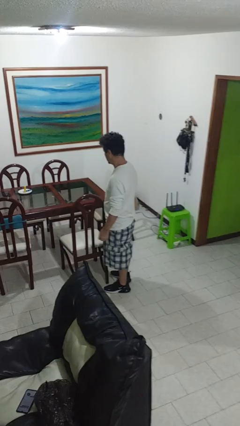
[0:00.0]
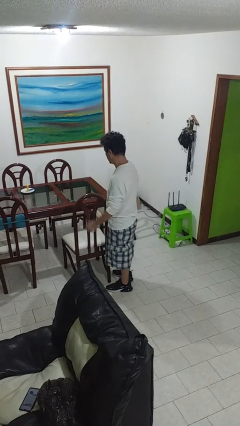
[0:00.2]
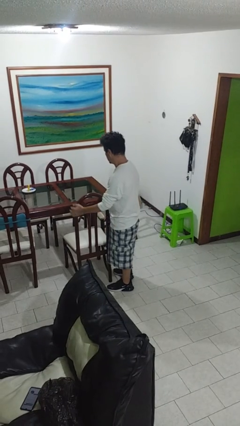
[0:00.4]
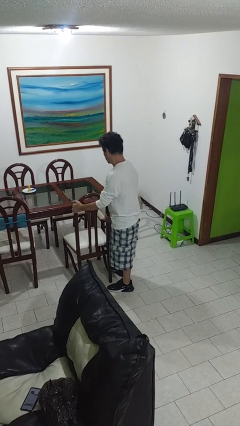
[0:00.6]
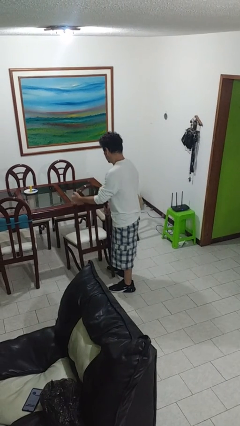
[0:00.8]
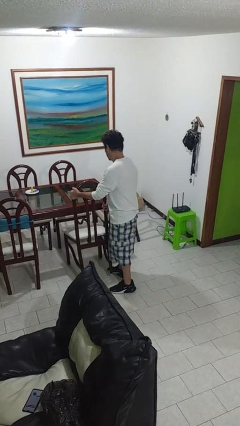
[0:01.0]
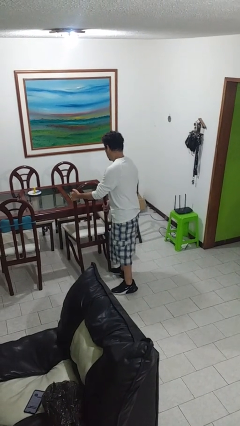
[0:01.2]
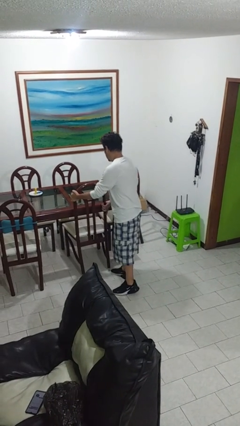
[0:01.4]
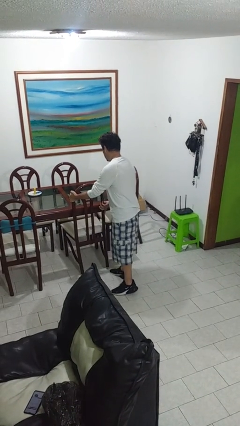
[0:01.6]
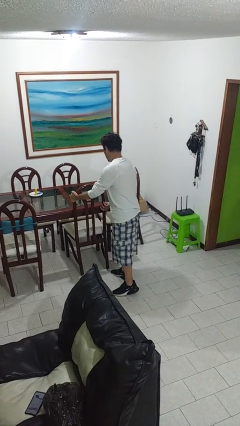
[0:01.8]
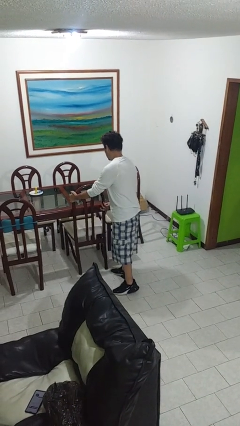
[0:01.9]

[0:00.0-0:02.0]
person pushes in chair

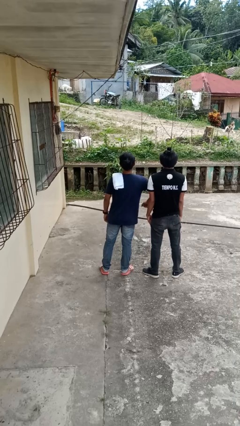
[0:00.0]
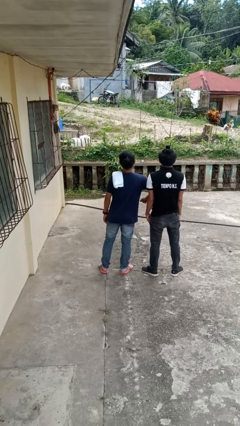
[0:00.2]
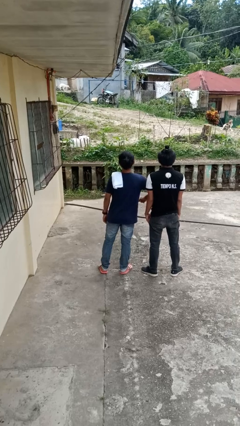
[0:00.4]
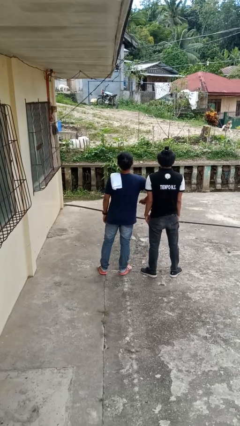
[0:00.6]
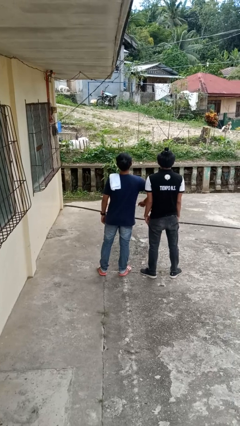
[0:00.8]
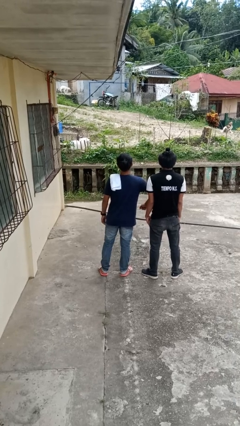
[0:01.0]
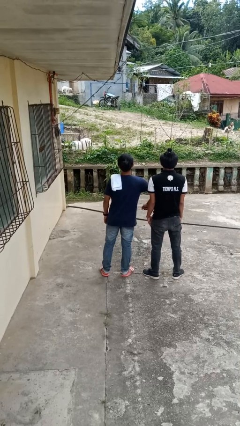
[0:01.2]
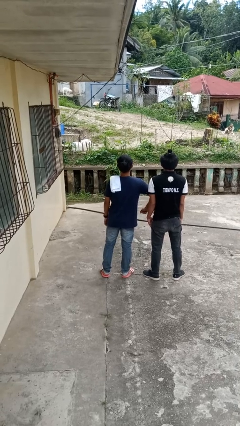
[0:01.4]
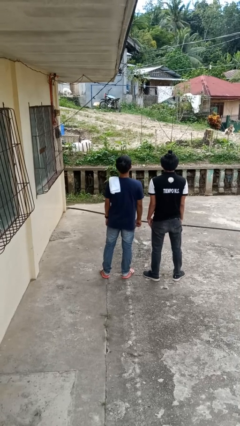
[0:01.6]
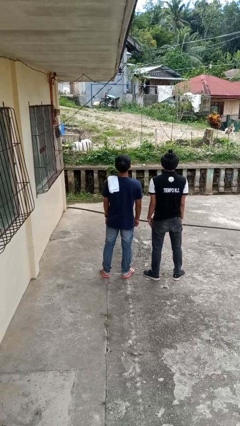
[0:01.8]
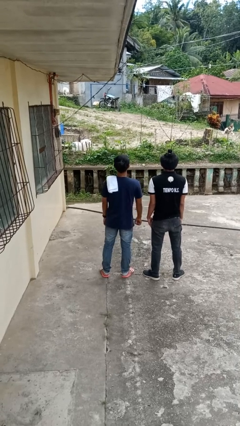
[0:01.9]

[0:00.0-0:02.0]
person nudges person with elbow

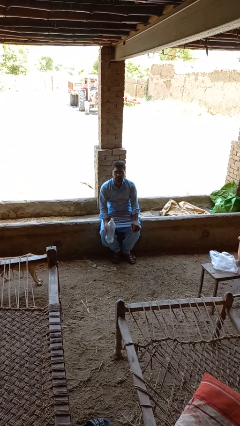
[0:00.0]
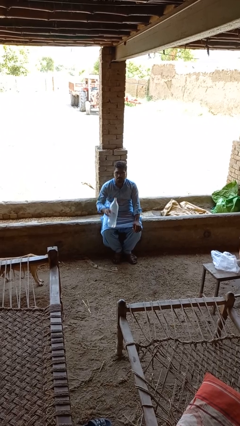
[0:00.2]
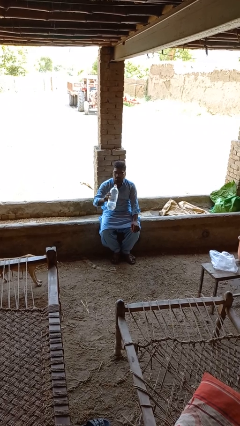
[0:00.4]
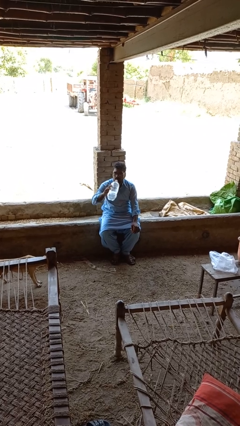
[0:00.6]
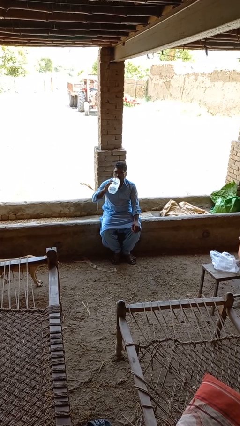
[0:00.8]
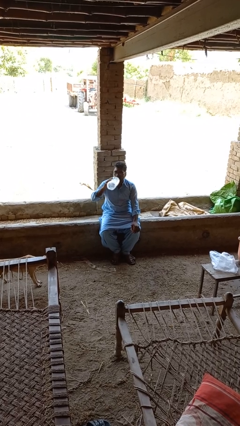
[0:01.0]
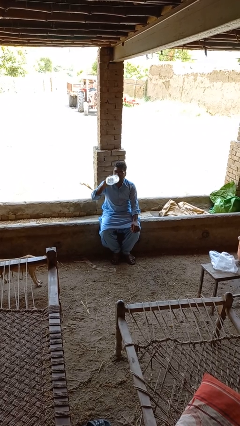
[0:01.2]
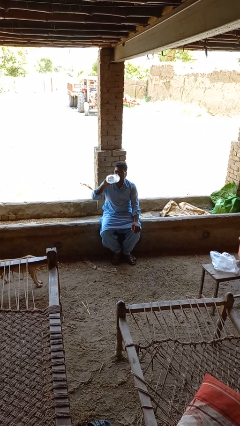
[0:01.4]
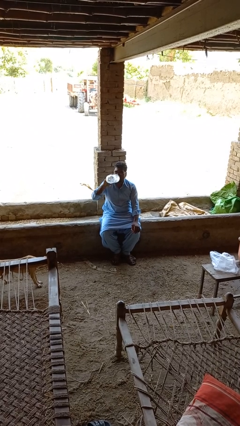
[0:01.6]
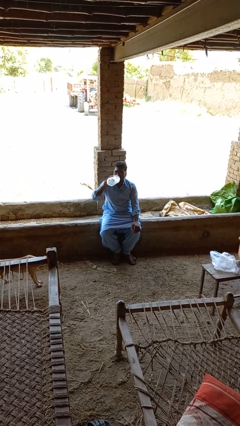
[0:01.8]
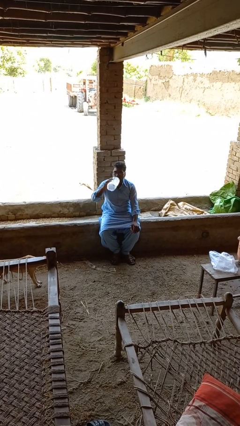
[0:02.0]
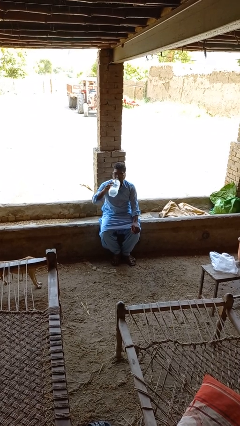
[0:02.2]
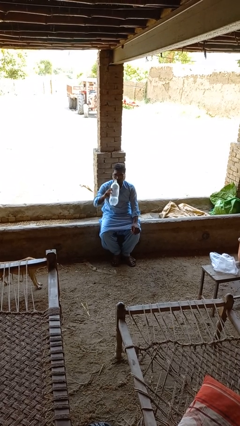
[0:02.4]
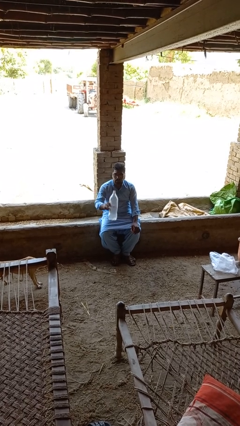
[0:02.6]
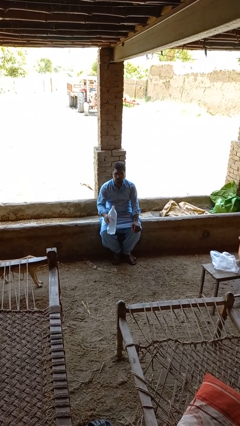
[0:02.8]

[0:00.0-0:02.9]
person drinks from bottle

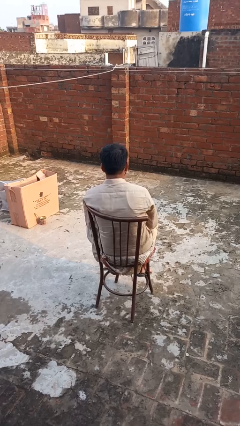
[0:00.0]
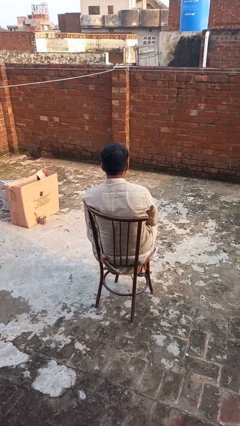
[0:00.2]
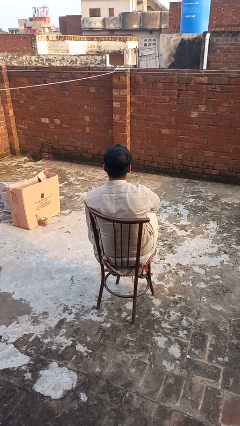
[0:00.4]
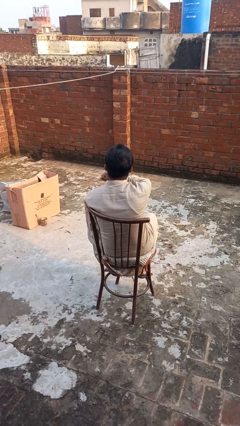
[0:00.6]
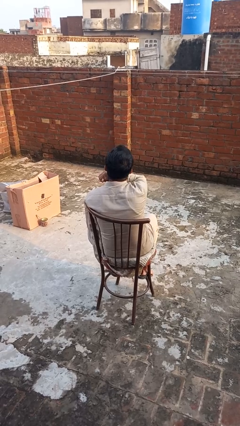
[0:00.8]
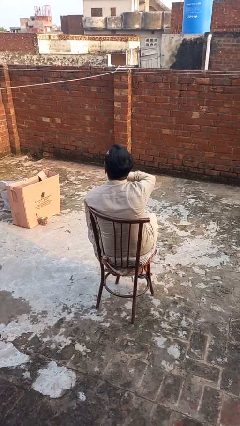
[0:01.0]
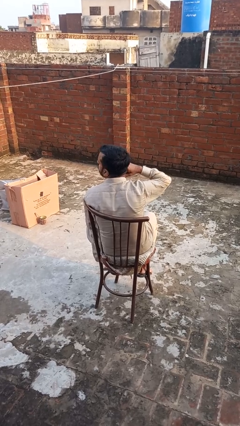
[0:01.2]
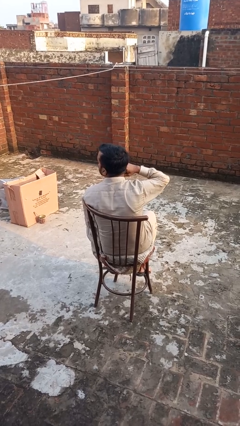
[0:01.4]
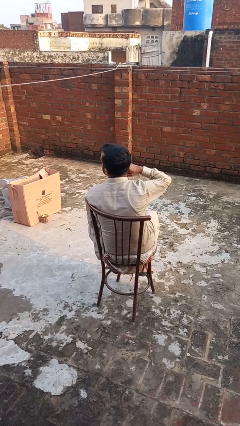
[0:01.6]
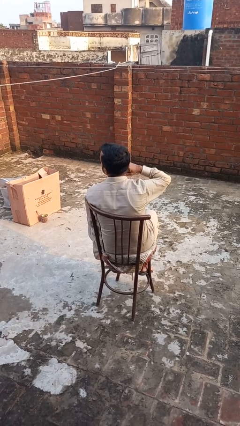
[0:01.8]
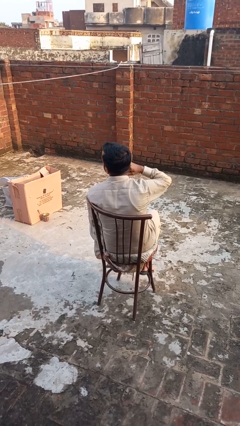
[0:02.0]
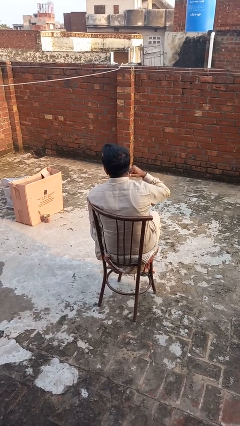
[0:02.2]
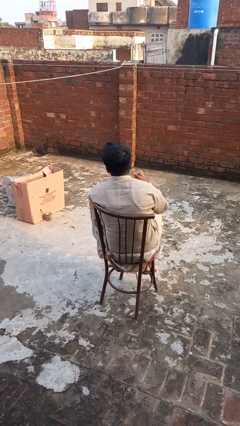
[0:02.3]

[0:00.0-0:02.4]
person gestures cut

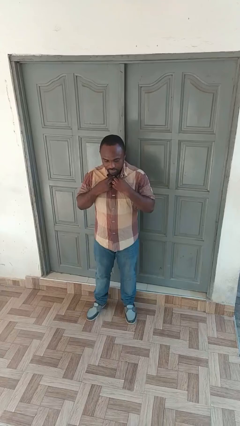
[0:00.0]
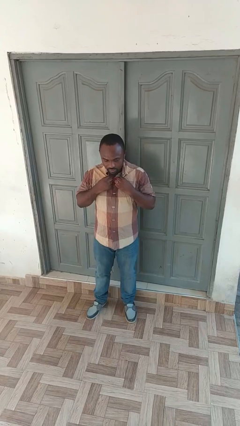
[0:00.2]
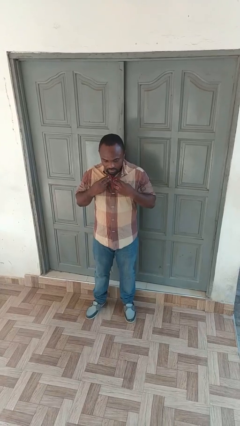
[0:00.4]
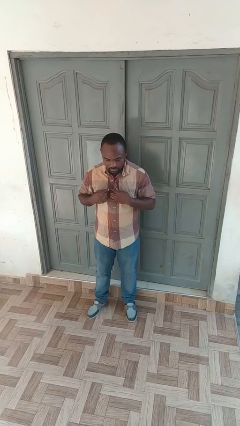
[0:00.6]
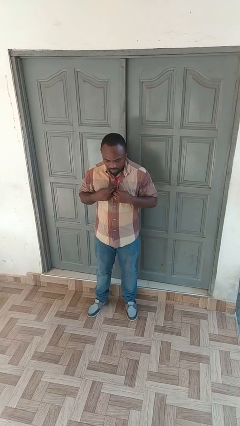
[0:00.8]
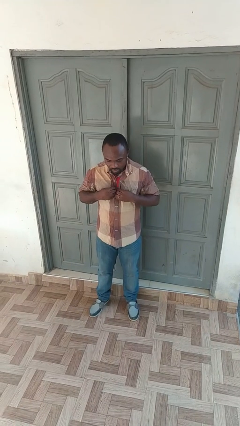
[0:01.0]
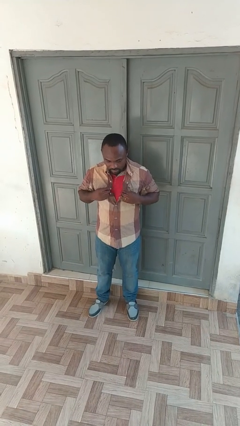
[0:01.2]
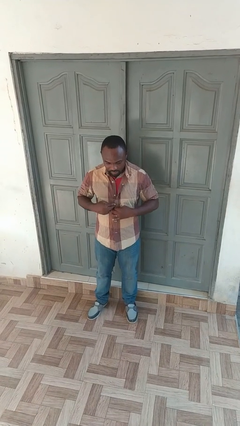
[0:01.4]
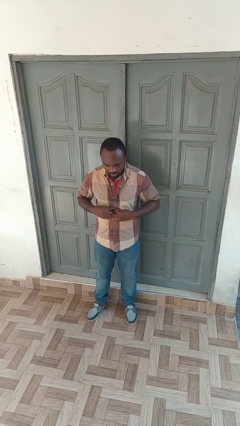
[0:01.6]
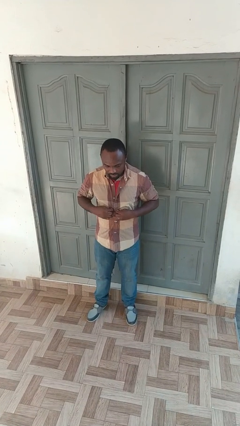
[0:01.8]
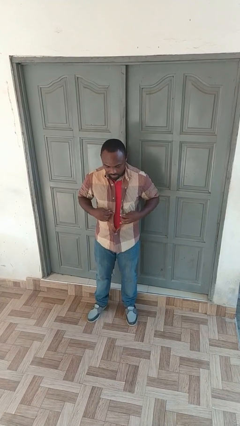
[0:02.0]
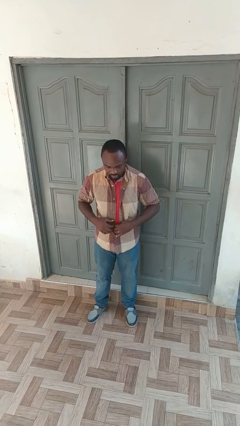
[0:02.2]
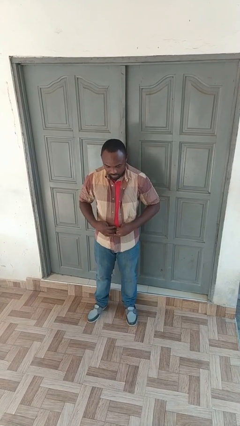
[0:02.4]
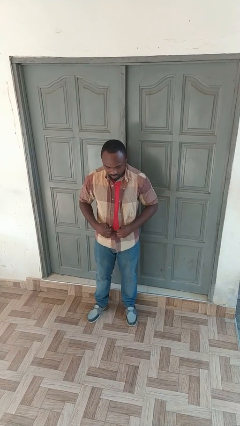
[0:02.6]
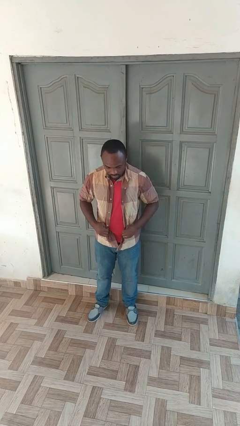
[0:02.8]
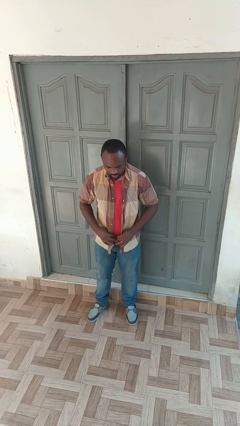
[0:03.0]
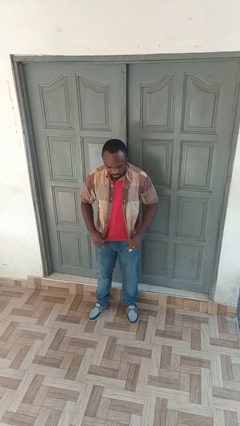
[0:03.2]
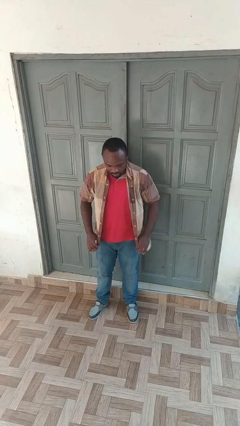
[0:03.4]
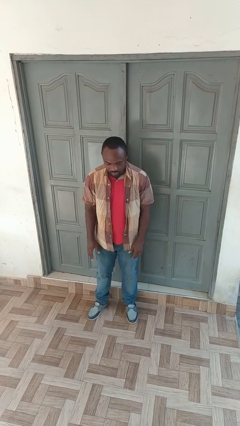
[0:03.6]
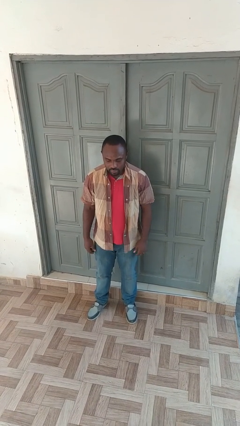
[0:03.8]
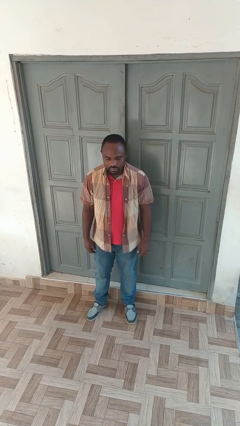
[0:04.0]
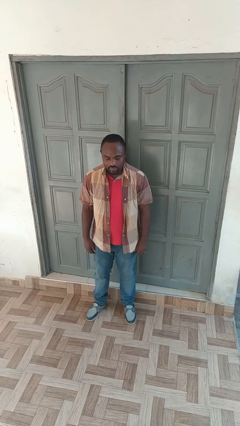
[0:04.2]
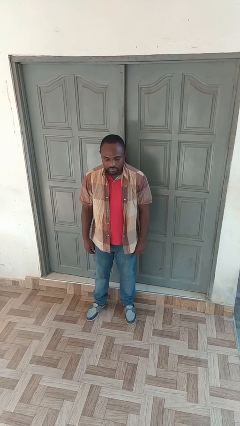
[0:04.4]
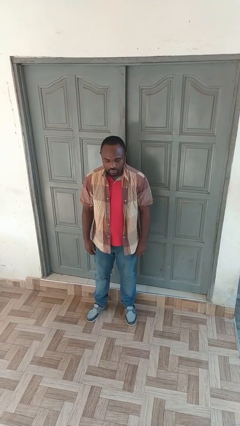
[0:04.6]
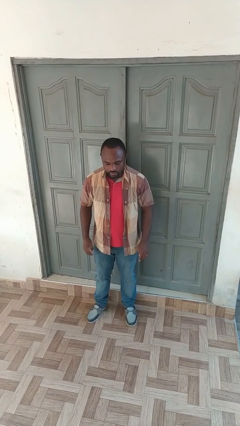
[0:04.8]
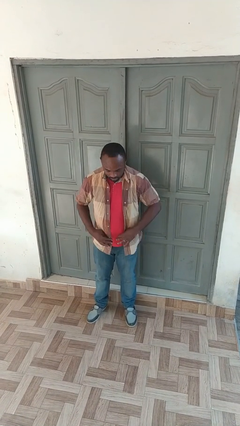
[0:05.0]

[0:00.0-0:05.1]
person unbuttons shirt

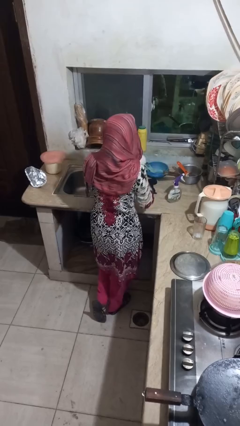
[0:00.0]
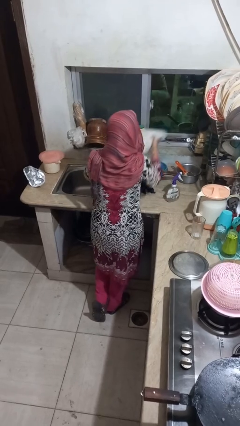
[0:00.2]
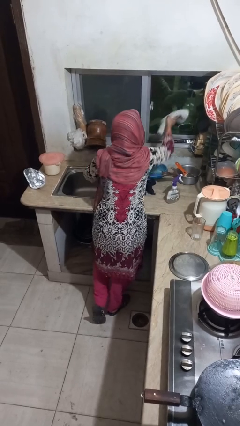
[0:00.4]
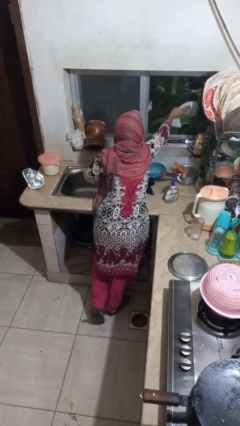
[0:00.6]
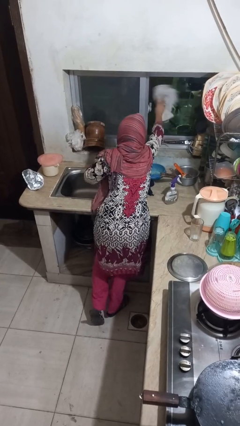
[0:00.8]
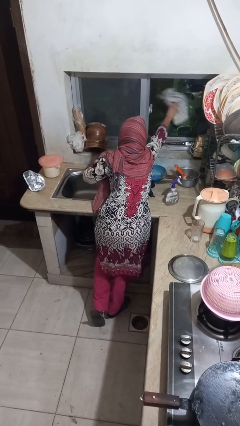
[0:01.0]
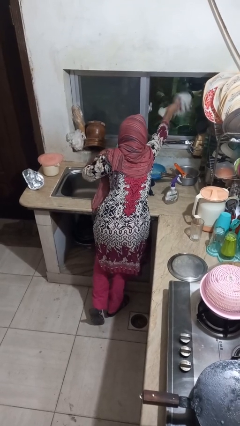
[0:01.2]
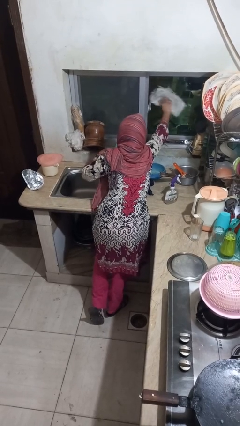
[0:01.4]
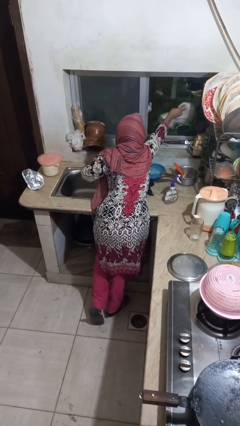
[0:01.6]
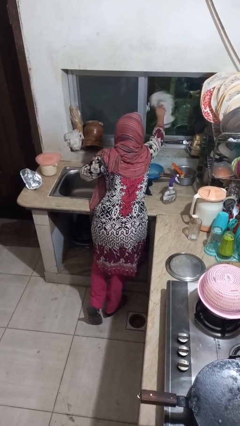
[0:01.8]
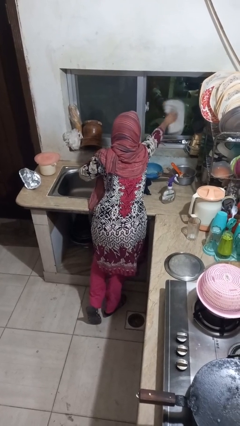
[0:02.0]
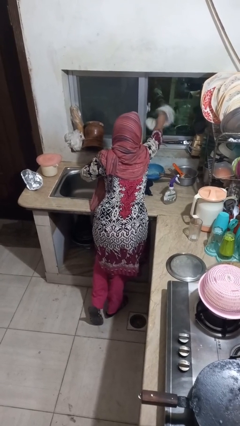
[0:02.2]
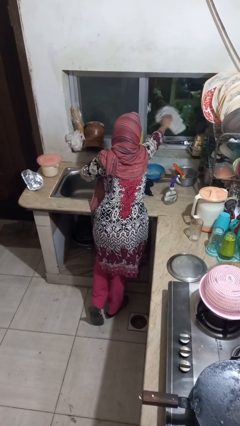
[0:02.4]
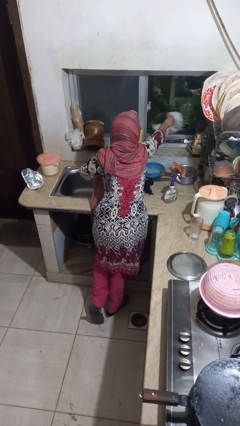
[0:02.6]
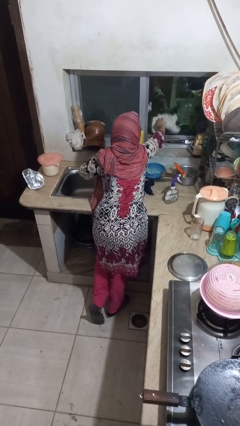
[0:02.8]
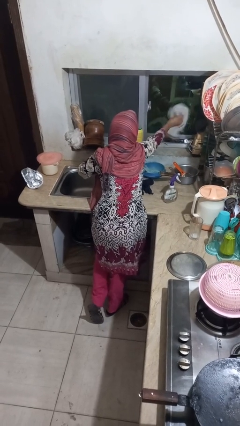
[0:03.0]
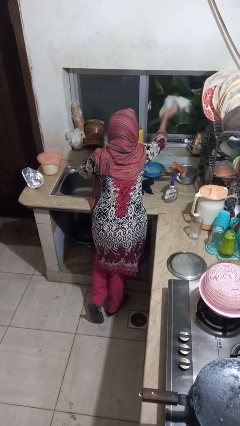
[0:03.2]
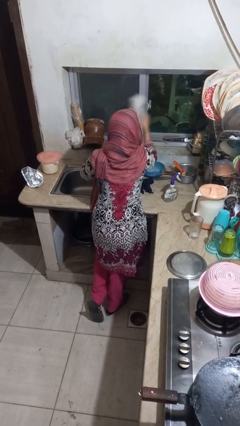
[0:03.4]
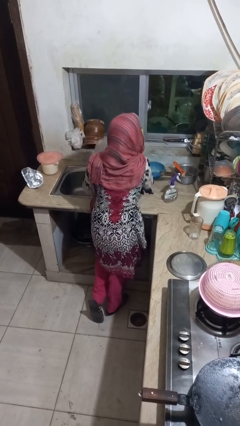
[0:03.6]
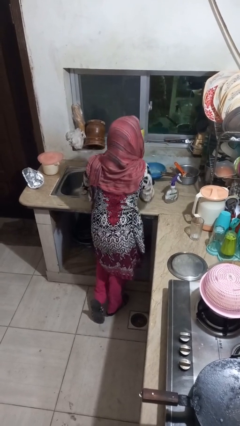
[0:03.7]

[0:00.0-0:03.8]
person washes window
